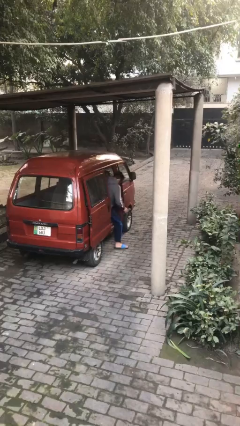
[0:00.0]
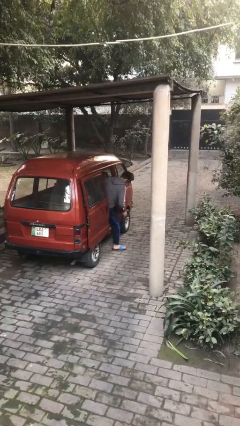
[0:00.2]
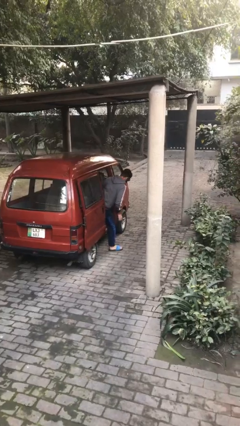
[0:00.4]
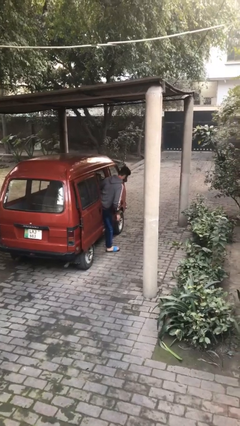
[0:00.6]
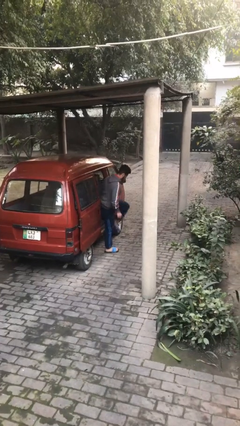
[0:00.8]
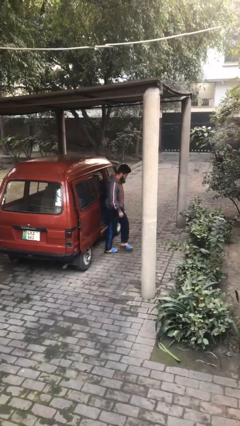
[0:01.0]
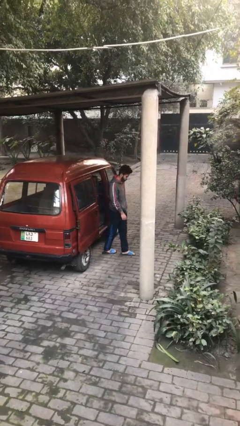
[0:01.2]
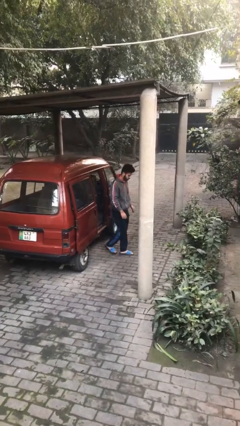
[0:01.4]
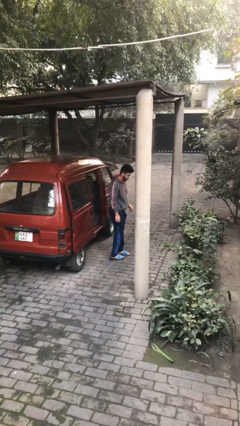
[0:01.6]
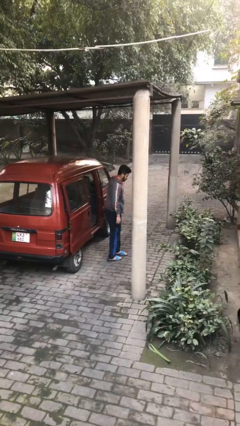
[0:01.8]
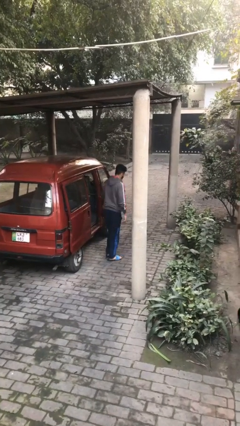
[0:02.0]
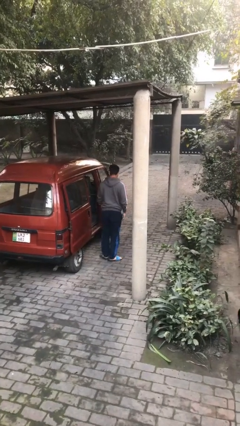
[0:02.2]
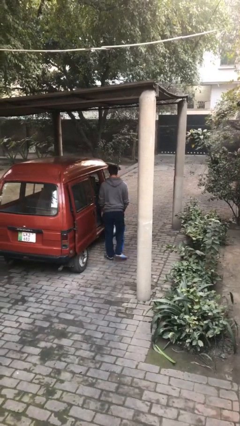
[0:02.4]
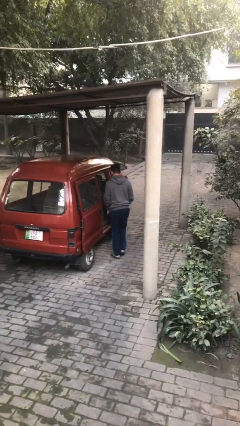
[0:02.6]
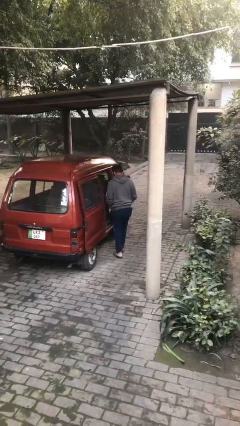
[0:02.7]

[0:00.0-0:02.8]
person exits car

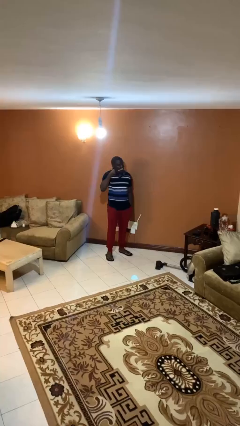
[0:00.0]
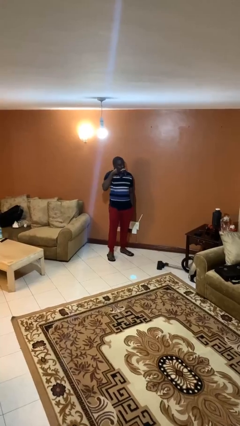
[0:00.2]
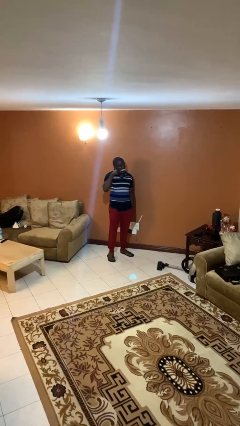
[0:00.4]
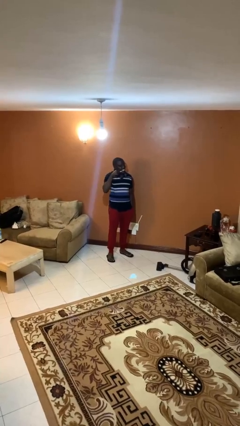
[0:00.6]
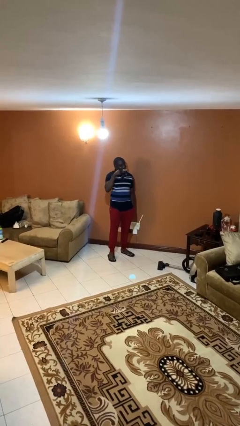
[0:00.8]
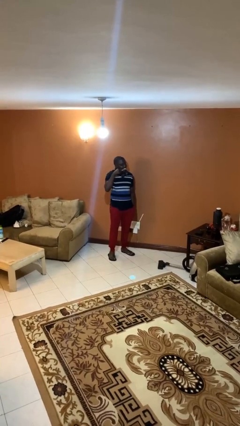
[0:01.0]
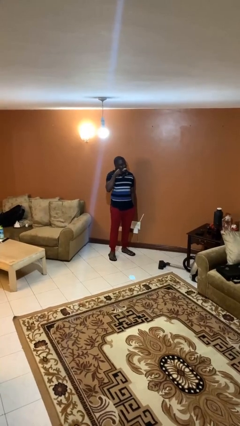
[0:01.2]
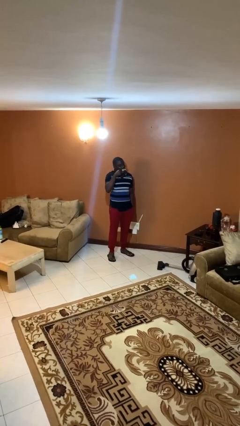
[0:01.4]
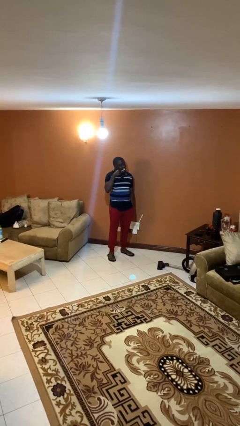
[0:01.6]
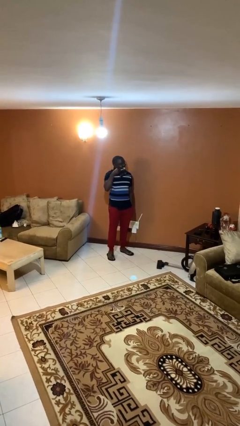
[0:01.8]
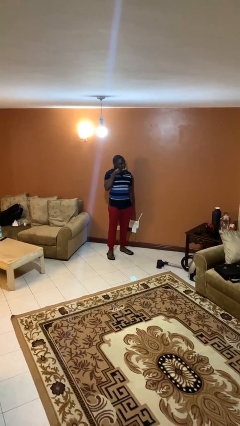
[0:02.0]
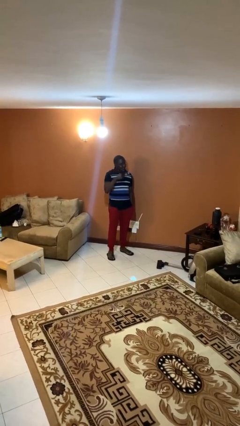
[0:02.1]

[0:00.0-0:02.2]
person brushes teeth

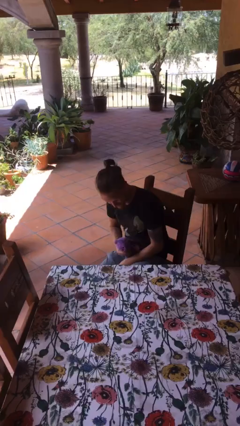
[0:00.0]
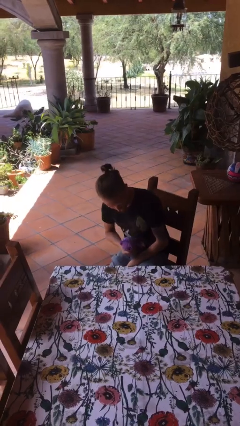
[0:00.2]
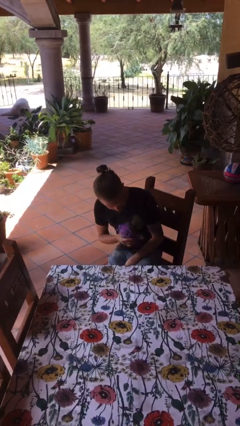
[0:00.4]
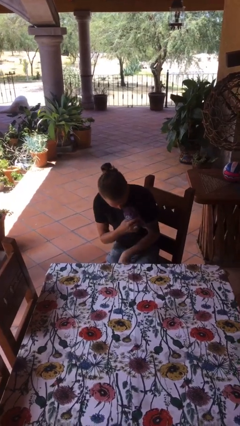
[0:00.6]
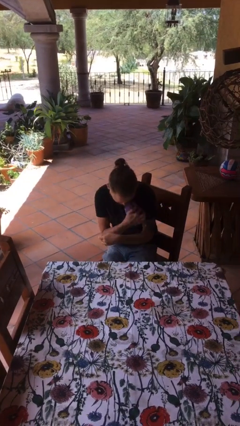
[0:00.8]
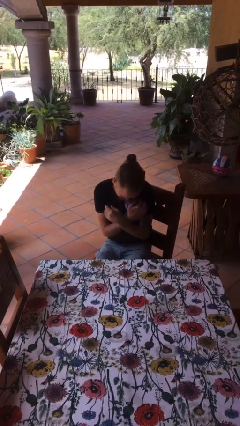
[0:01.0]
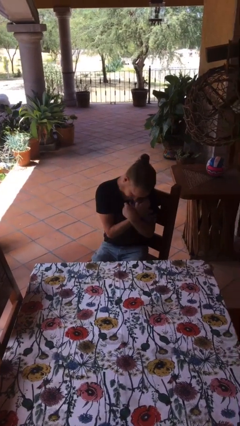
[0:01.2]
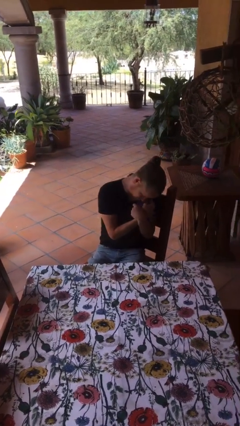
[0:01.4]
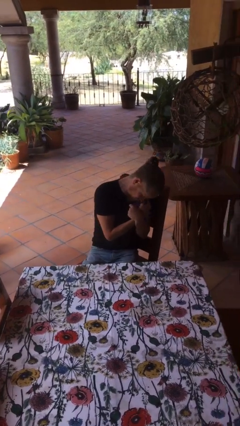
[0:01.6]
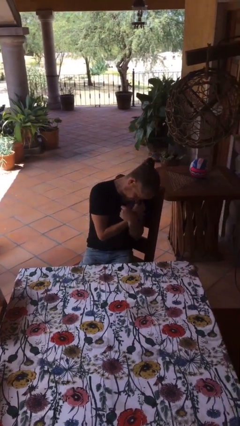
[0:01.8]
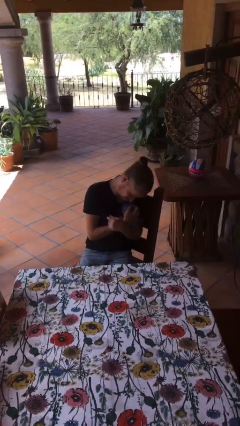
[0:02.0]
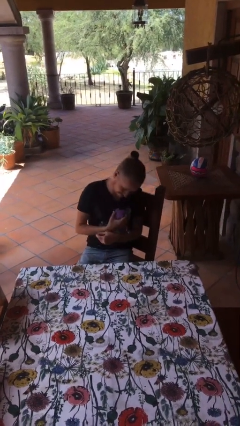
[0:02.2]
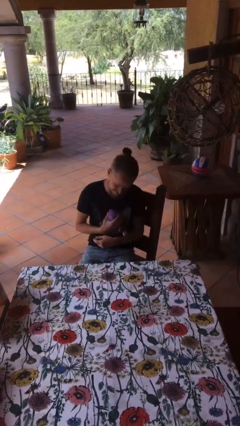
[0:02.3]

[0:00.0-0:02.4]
person hugs stuffed animal

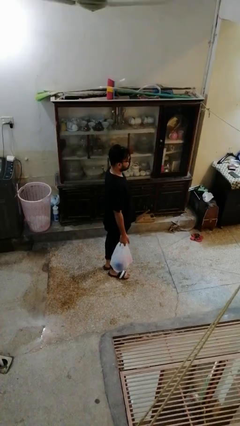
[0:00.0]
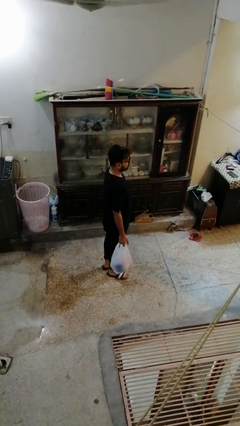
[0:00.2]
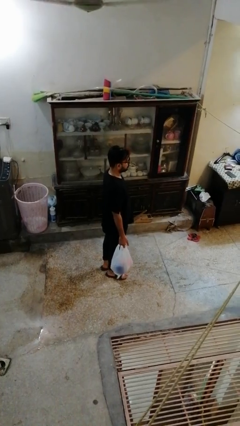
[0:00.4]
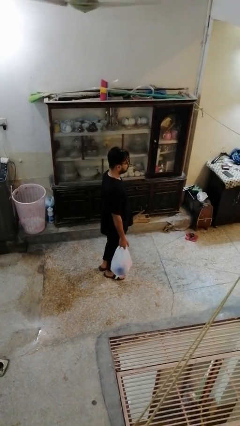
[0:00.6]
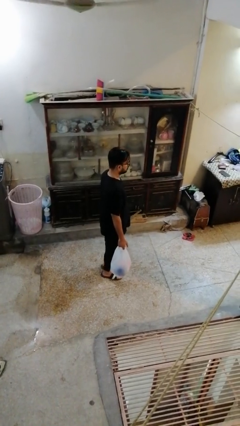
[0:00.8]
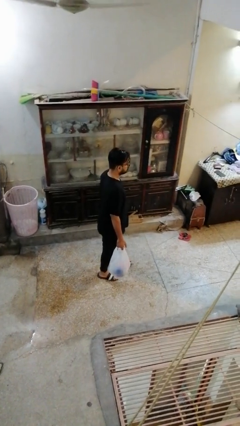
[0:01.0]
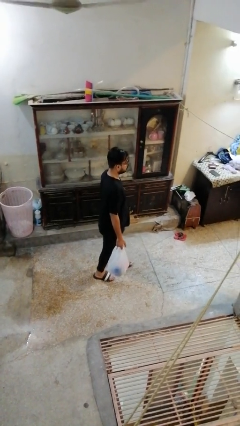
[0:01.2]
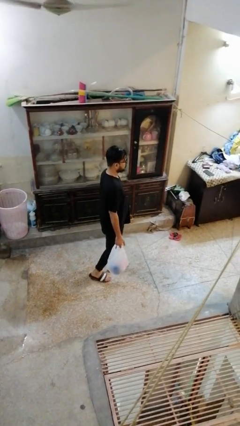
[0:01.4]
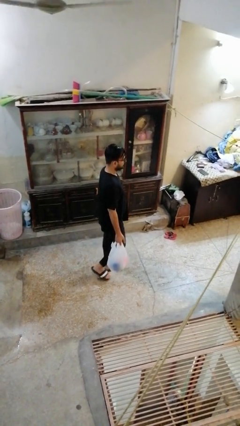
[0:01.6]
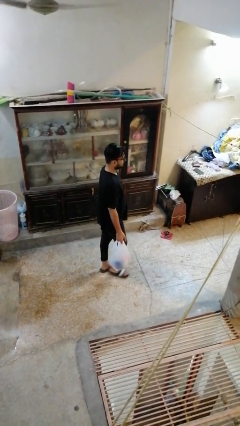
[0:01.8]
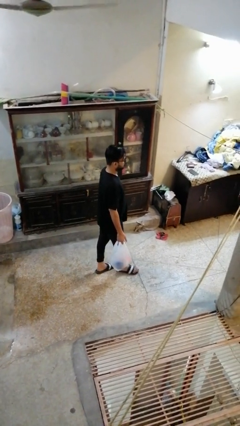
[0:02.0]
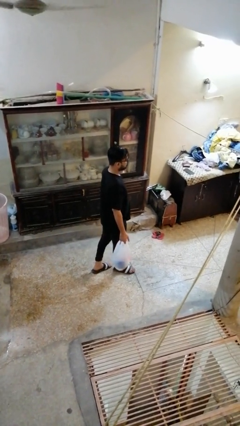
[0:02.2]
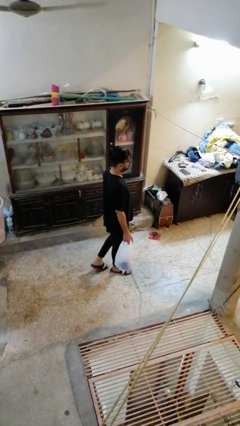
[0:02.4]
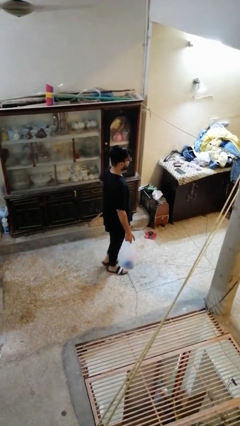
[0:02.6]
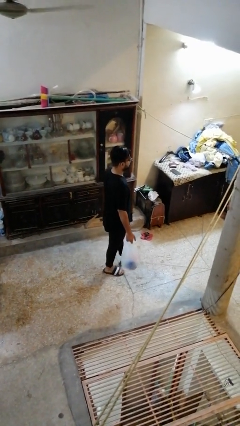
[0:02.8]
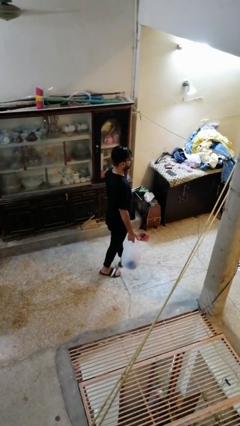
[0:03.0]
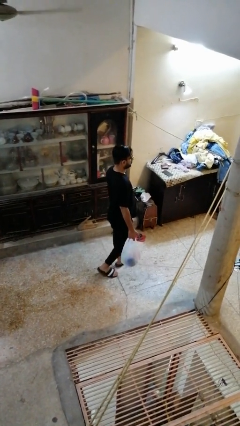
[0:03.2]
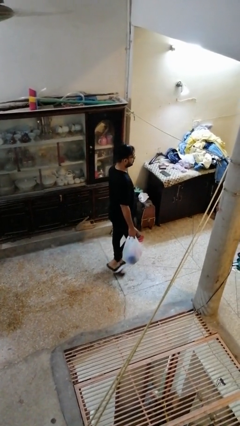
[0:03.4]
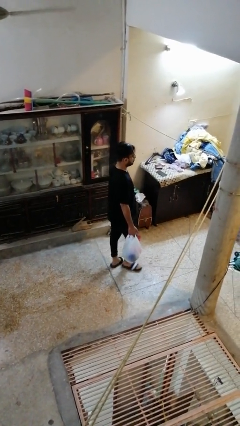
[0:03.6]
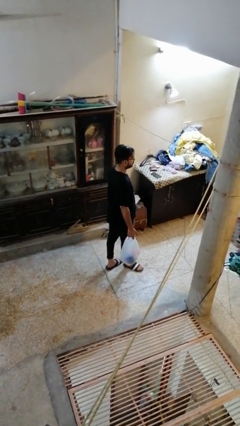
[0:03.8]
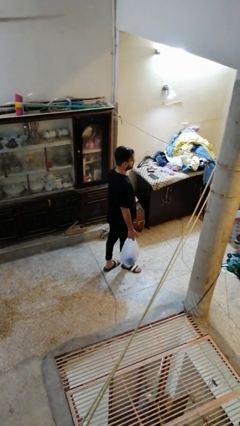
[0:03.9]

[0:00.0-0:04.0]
person carries groceries

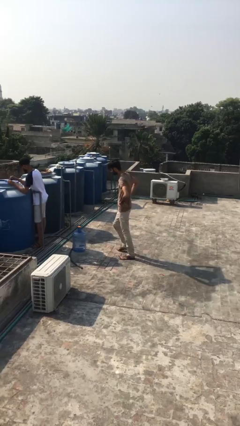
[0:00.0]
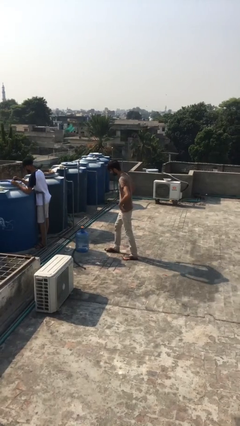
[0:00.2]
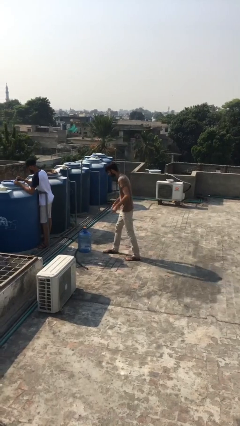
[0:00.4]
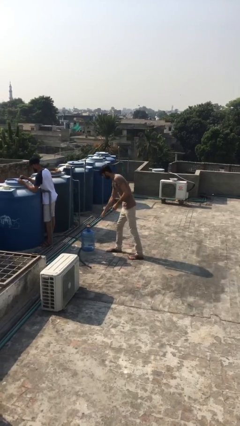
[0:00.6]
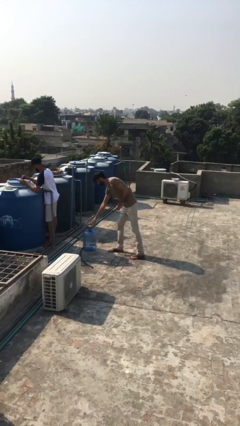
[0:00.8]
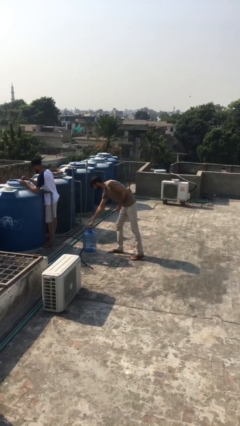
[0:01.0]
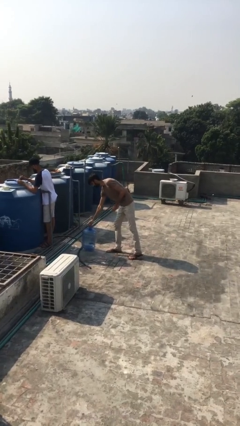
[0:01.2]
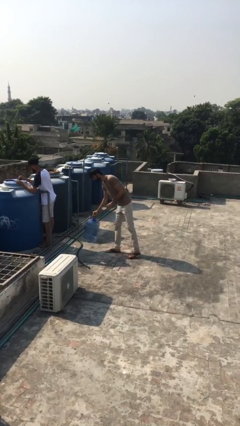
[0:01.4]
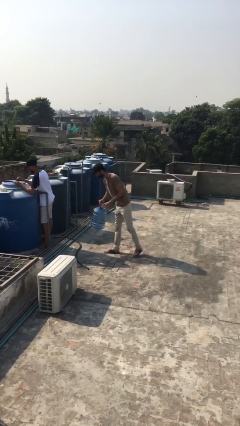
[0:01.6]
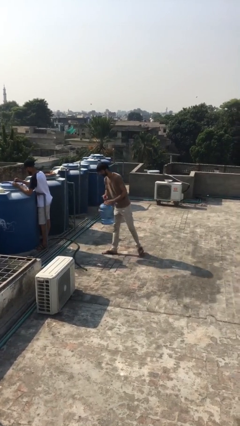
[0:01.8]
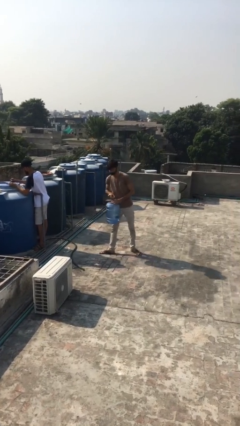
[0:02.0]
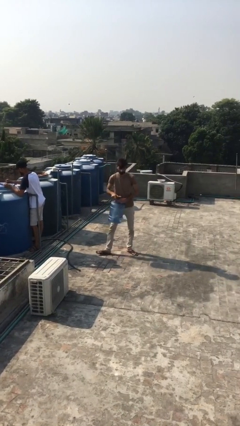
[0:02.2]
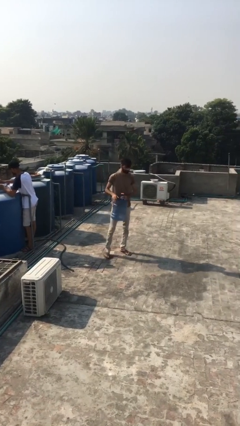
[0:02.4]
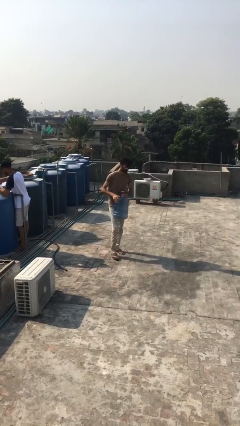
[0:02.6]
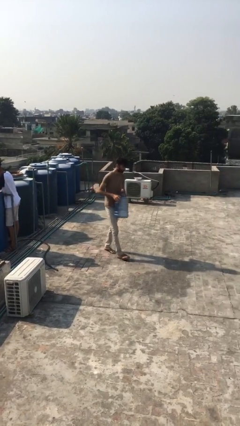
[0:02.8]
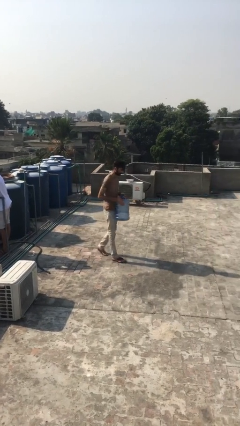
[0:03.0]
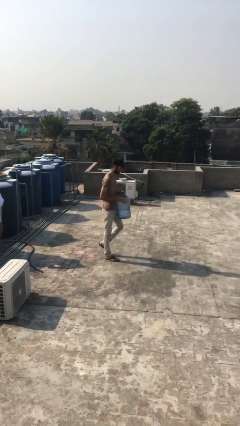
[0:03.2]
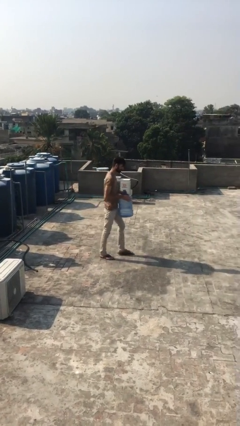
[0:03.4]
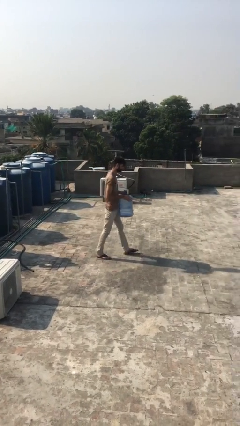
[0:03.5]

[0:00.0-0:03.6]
person steals object from person

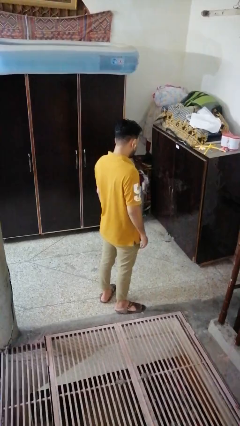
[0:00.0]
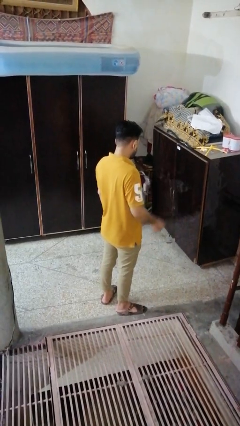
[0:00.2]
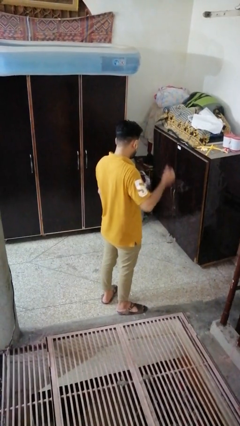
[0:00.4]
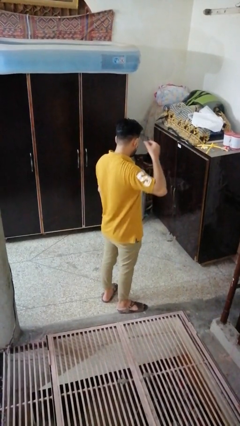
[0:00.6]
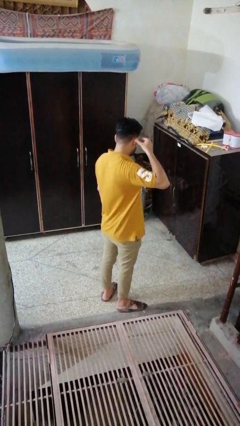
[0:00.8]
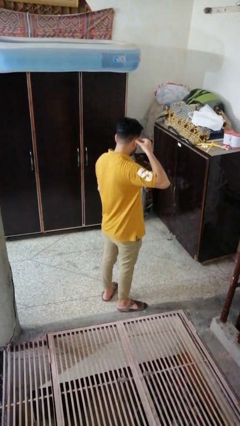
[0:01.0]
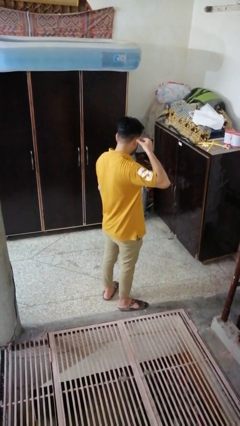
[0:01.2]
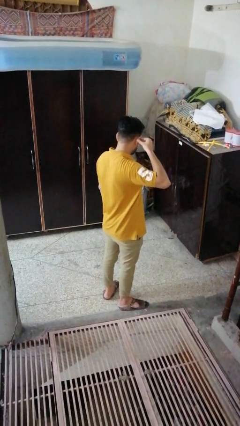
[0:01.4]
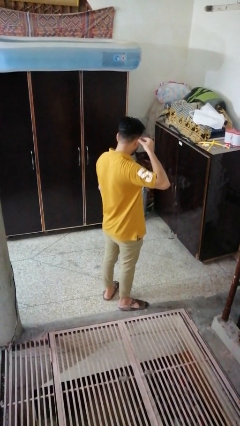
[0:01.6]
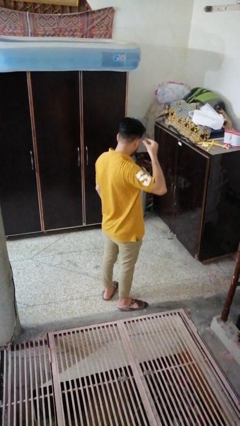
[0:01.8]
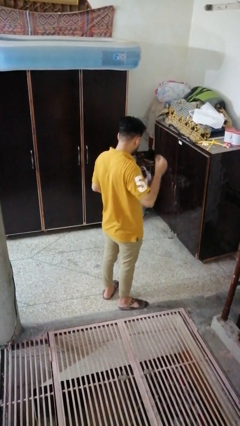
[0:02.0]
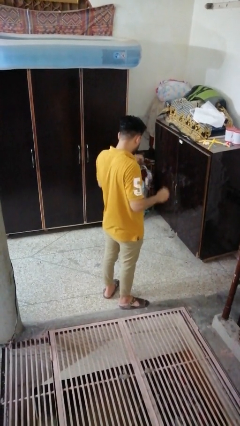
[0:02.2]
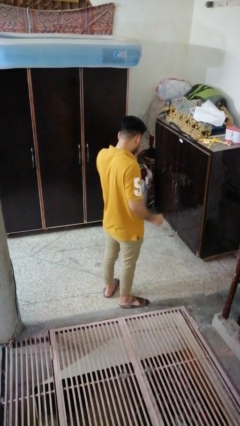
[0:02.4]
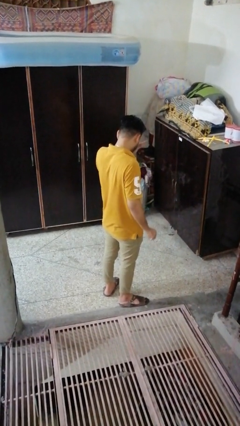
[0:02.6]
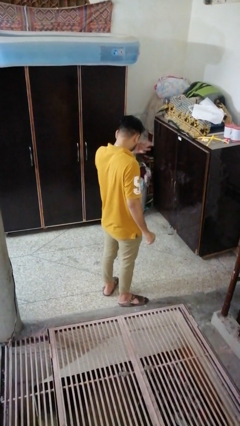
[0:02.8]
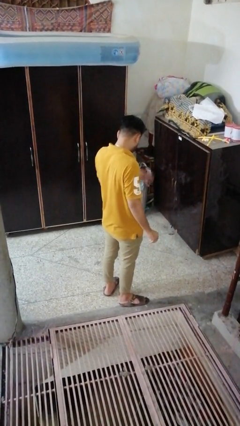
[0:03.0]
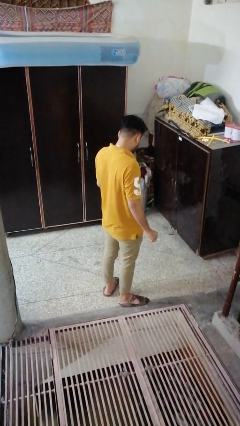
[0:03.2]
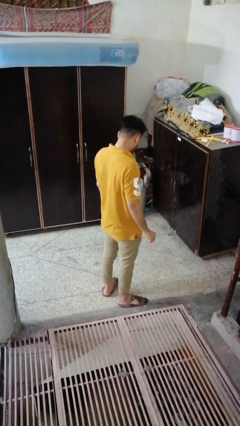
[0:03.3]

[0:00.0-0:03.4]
person takes off earrings
